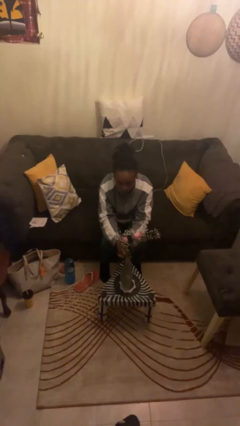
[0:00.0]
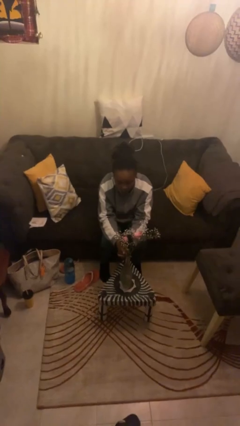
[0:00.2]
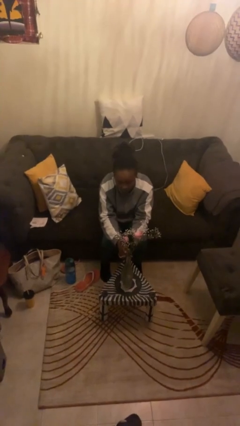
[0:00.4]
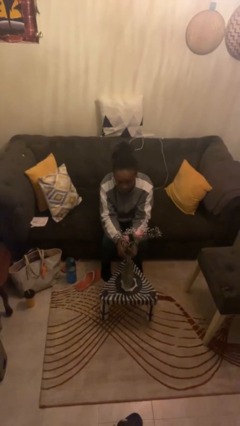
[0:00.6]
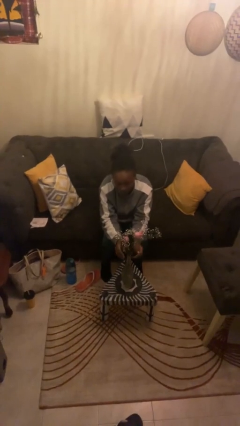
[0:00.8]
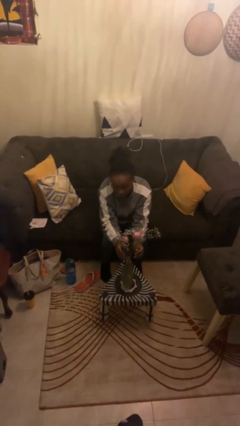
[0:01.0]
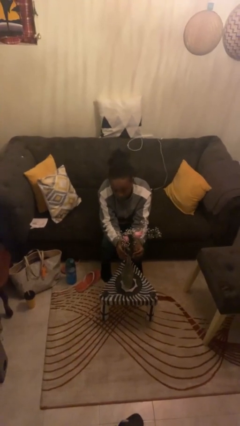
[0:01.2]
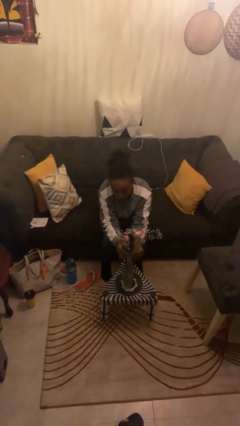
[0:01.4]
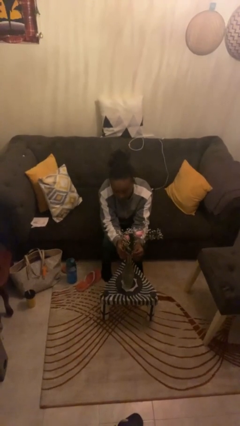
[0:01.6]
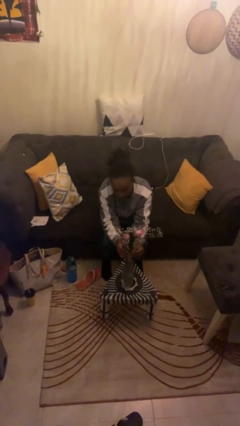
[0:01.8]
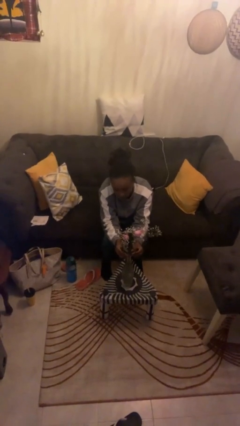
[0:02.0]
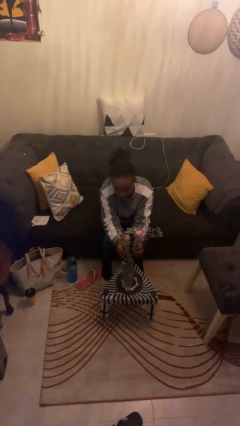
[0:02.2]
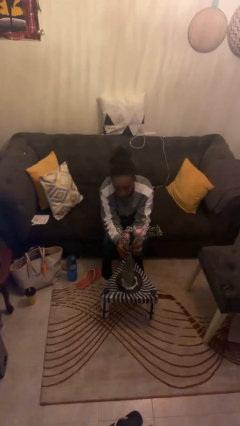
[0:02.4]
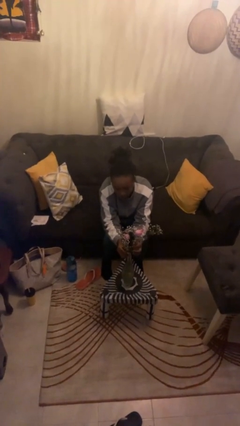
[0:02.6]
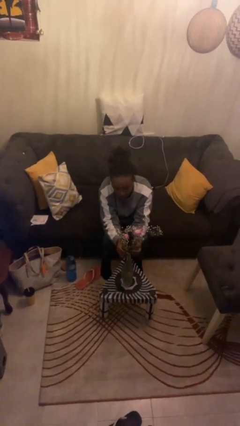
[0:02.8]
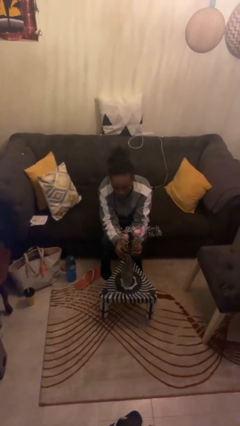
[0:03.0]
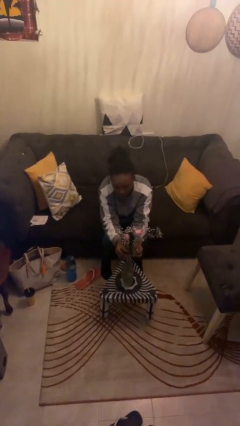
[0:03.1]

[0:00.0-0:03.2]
person arranges flowers in vase

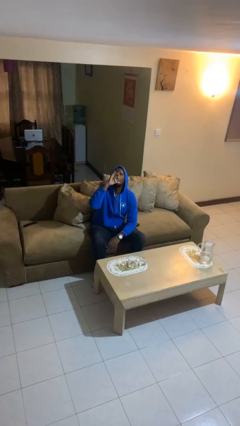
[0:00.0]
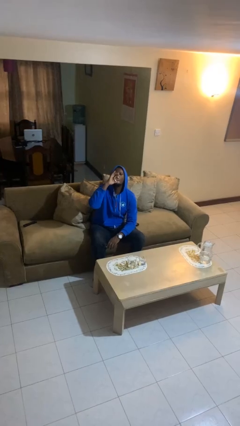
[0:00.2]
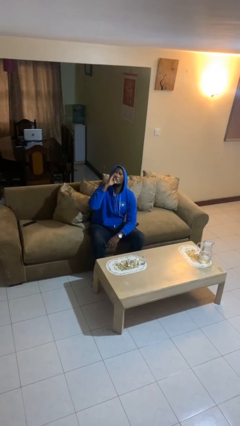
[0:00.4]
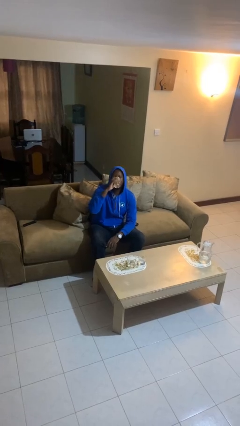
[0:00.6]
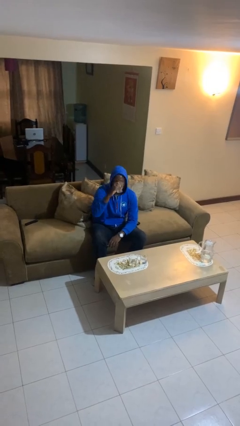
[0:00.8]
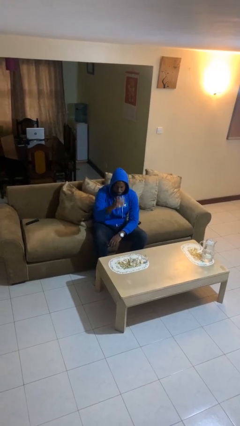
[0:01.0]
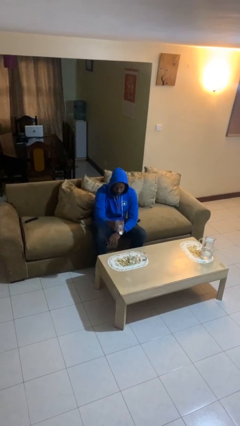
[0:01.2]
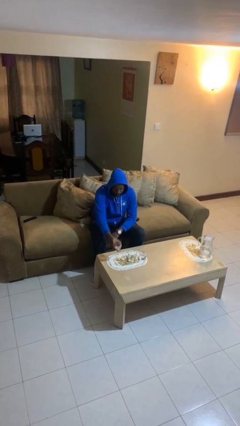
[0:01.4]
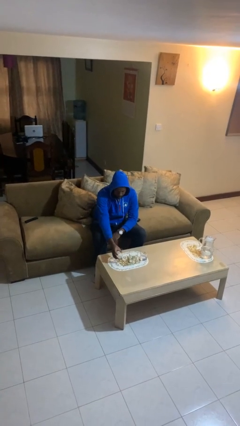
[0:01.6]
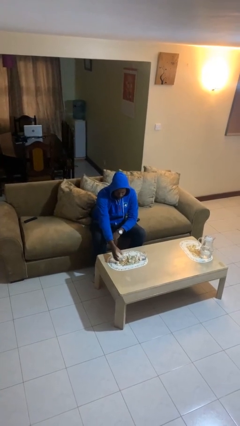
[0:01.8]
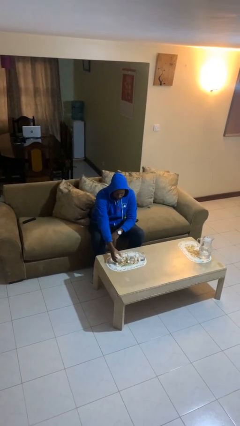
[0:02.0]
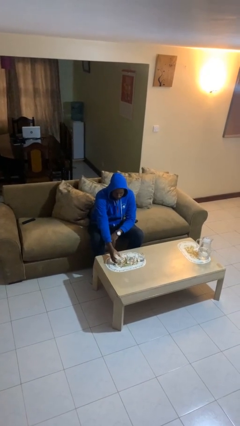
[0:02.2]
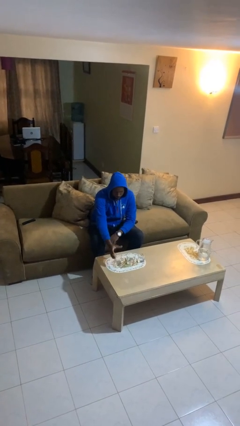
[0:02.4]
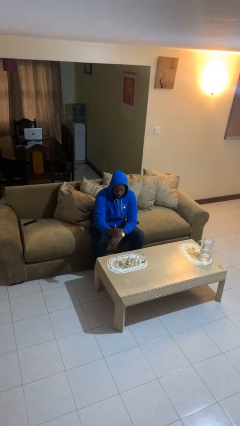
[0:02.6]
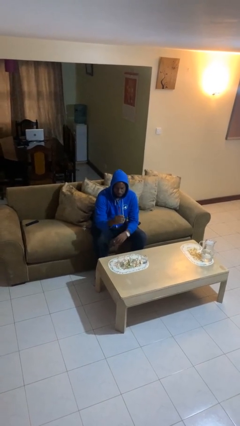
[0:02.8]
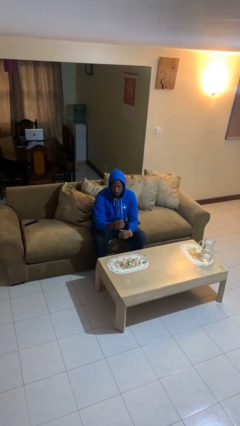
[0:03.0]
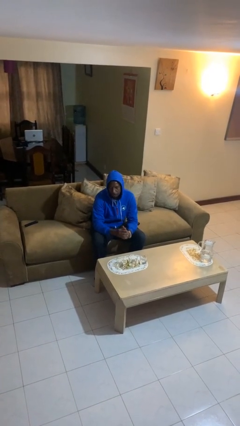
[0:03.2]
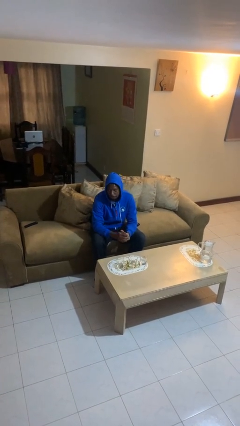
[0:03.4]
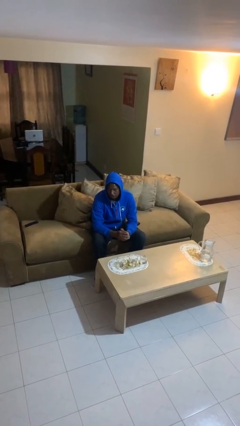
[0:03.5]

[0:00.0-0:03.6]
person puts down object on table

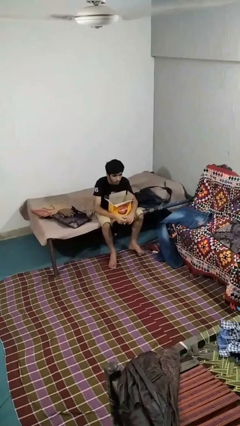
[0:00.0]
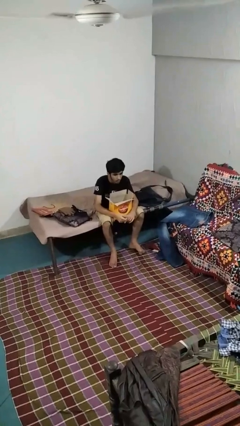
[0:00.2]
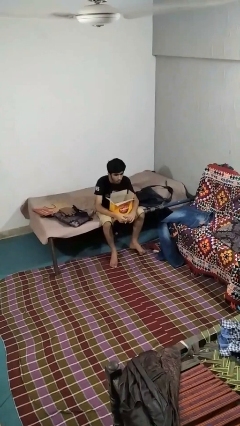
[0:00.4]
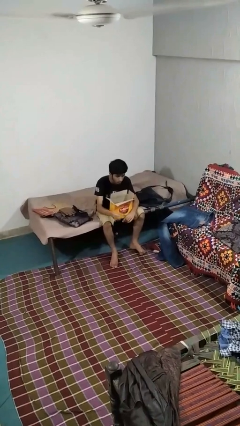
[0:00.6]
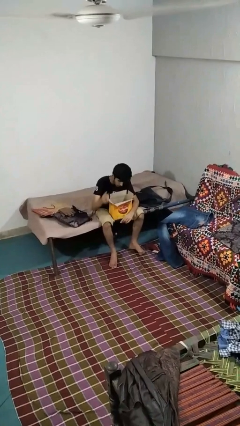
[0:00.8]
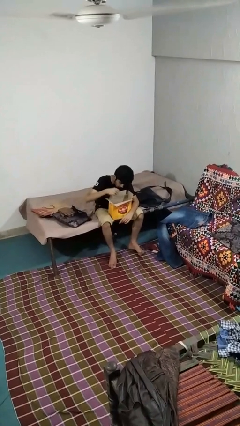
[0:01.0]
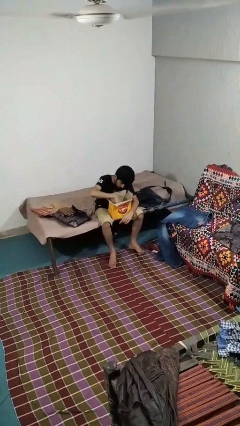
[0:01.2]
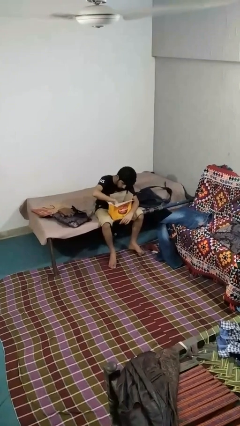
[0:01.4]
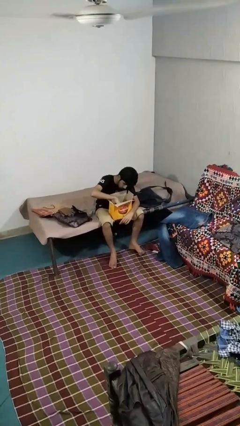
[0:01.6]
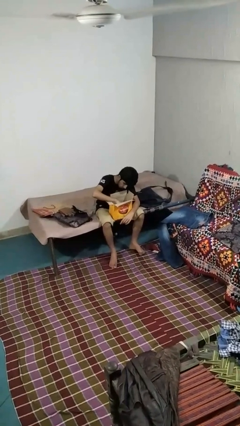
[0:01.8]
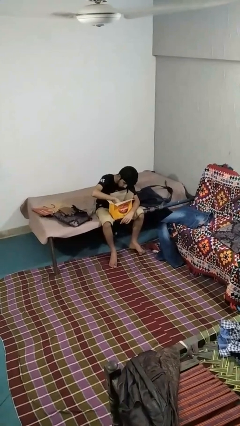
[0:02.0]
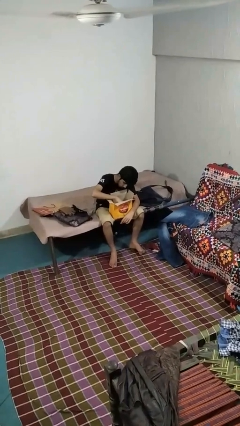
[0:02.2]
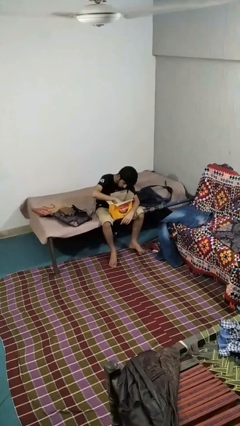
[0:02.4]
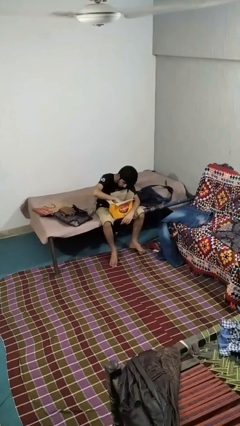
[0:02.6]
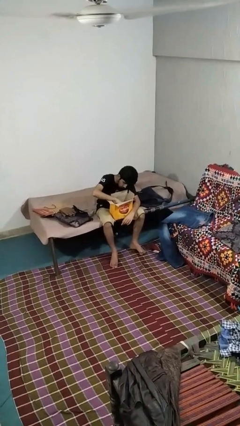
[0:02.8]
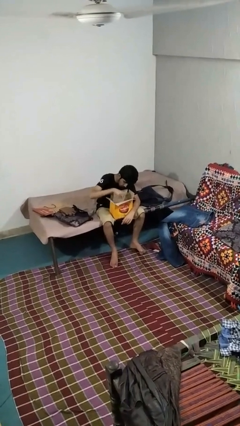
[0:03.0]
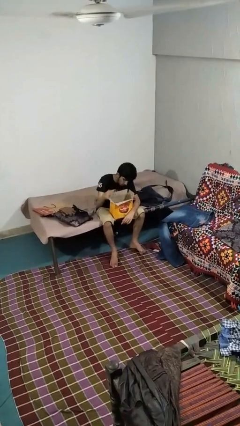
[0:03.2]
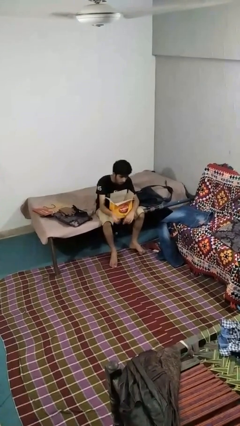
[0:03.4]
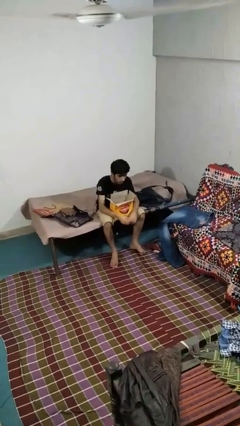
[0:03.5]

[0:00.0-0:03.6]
person searches in box

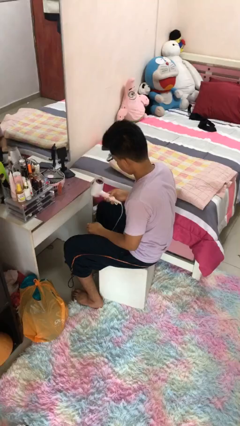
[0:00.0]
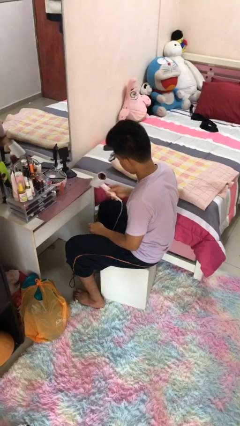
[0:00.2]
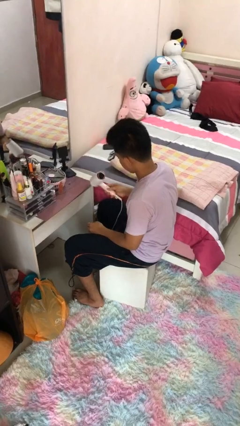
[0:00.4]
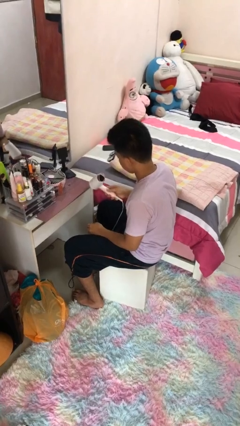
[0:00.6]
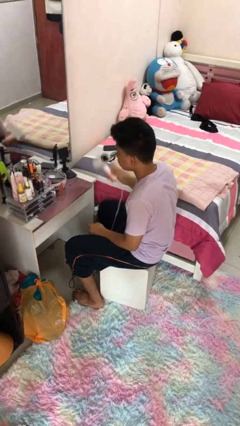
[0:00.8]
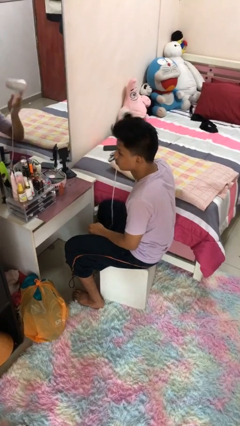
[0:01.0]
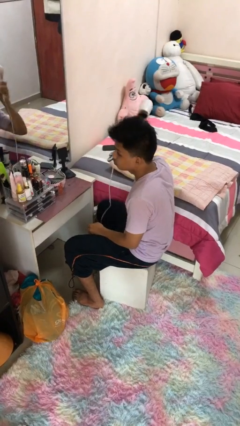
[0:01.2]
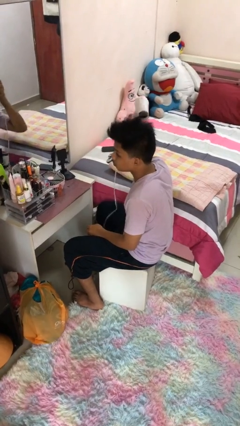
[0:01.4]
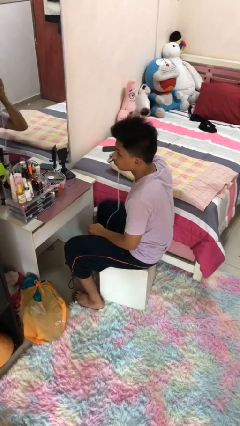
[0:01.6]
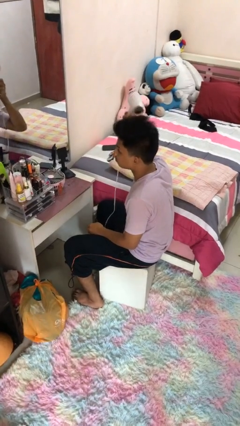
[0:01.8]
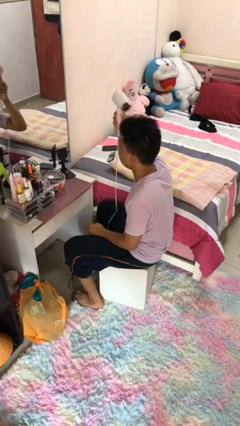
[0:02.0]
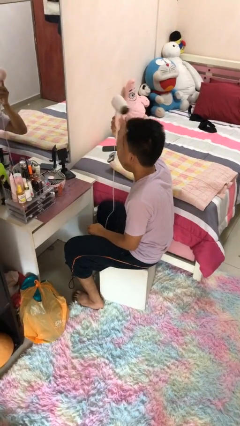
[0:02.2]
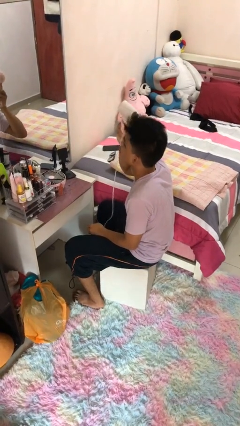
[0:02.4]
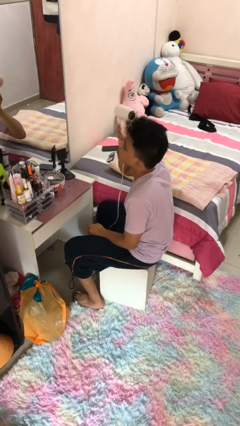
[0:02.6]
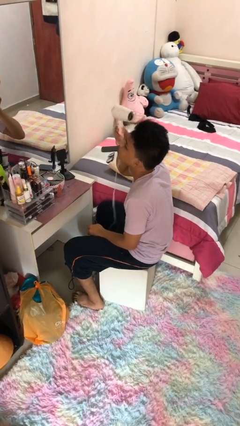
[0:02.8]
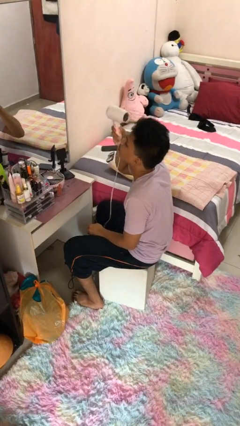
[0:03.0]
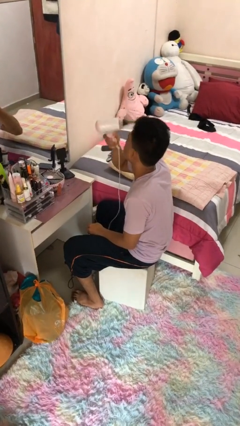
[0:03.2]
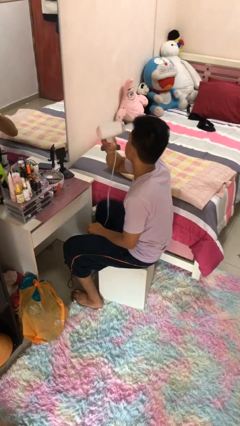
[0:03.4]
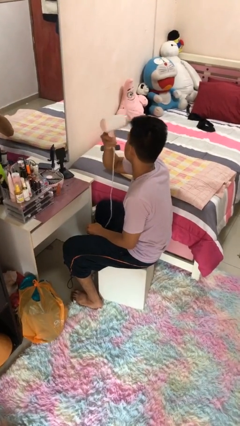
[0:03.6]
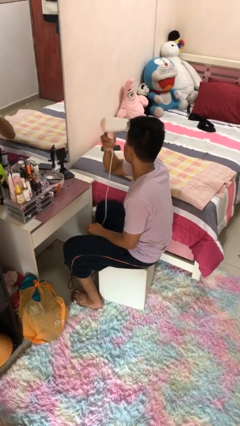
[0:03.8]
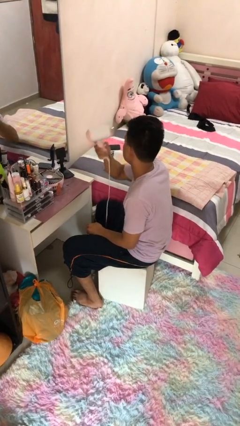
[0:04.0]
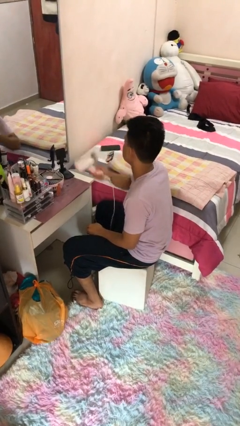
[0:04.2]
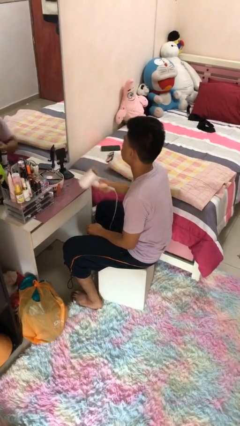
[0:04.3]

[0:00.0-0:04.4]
person dries hair with hairdryer

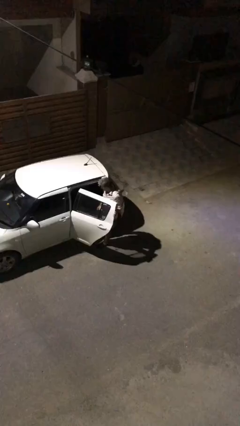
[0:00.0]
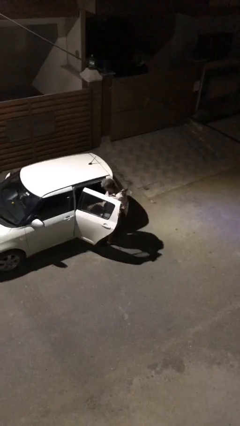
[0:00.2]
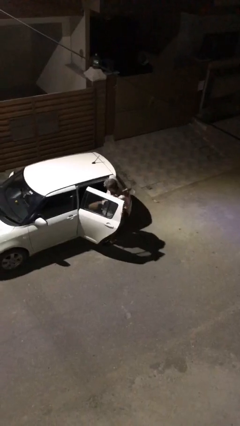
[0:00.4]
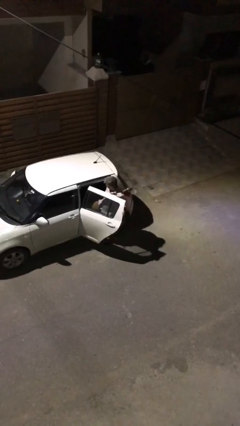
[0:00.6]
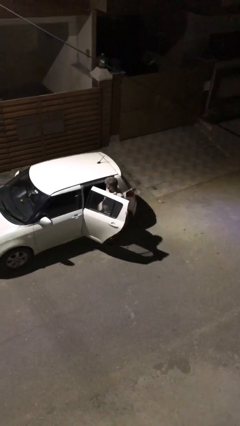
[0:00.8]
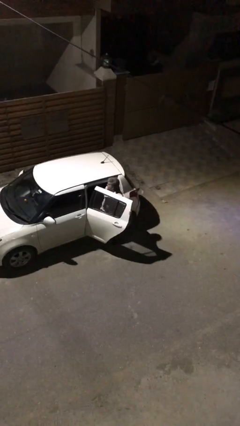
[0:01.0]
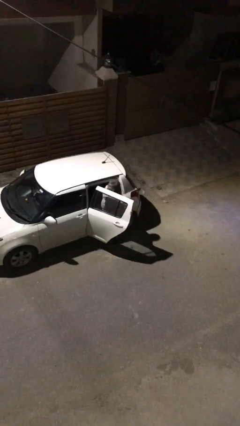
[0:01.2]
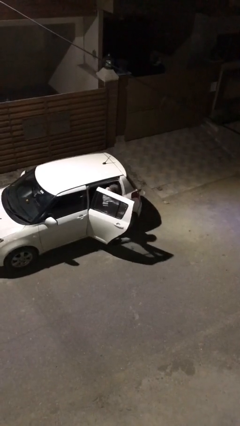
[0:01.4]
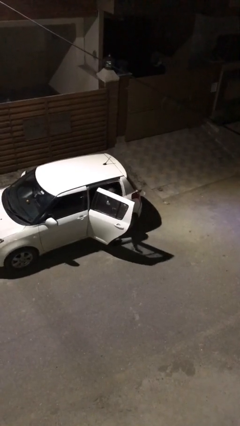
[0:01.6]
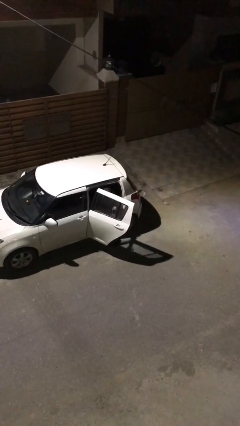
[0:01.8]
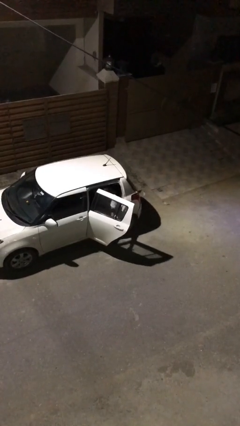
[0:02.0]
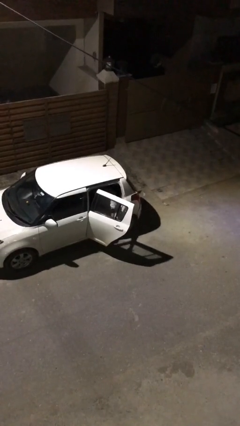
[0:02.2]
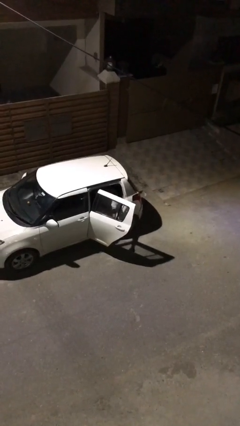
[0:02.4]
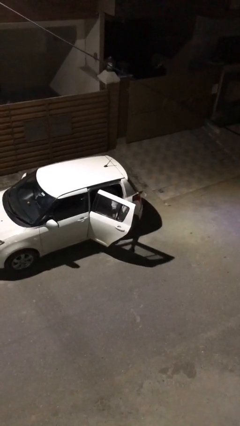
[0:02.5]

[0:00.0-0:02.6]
person enters car
